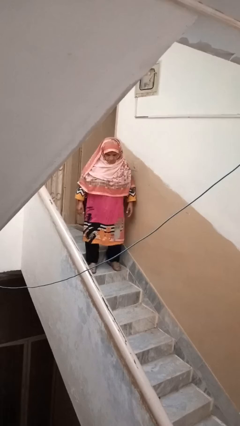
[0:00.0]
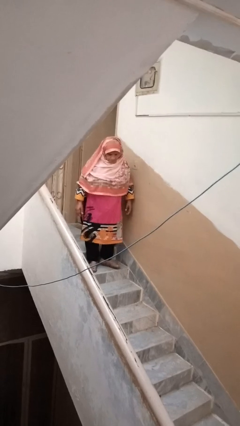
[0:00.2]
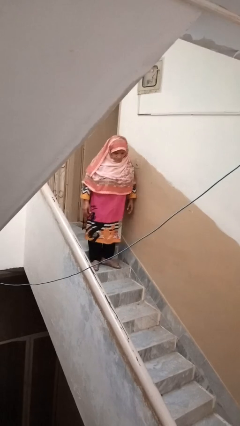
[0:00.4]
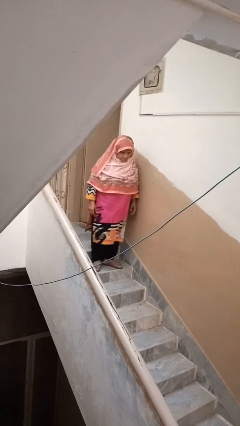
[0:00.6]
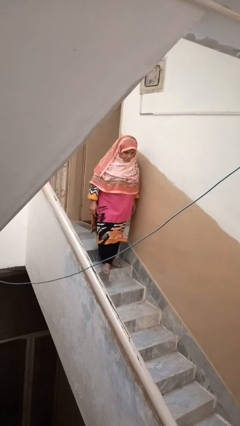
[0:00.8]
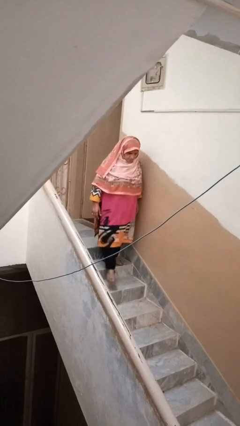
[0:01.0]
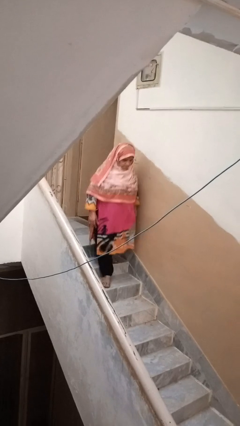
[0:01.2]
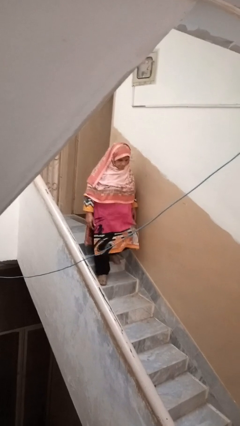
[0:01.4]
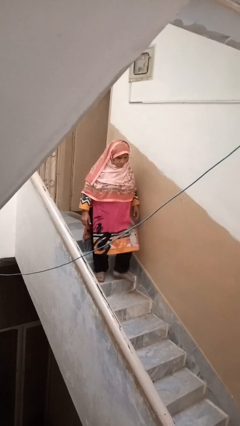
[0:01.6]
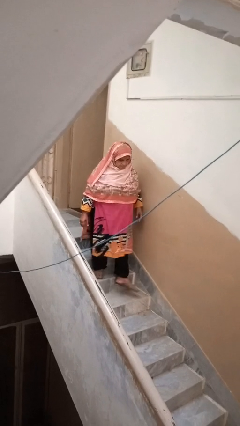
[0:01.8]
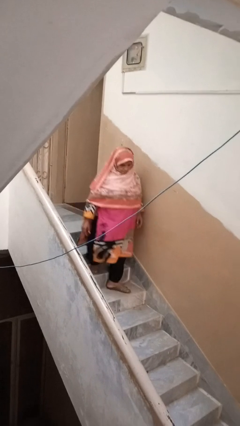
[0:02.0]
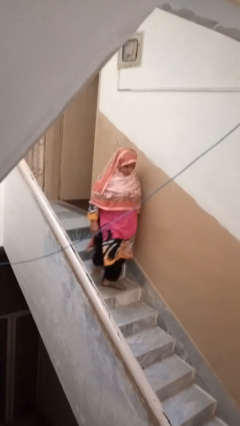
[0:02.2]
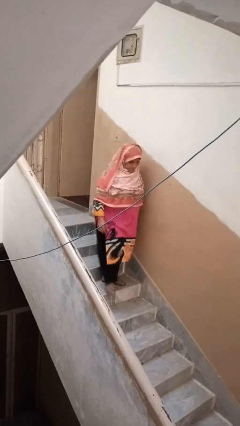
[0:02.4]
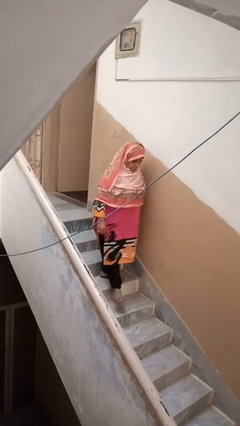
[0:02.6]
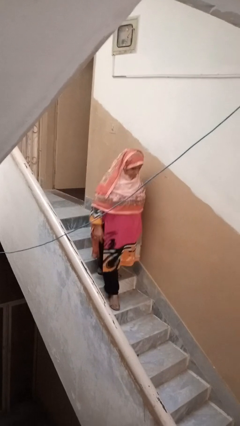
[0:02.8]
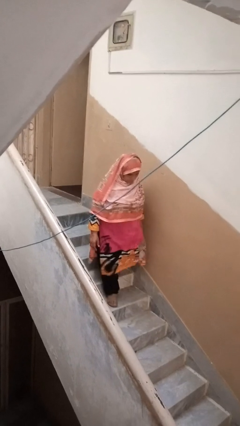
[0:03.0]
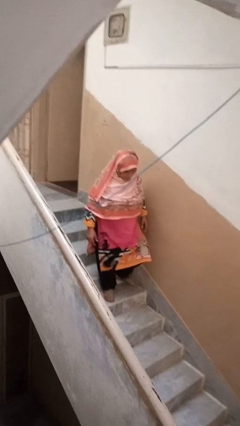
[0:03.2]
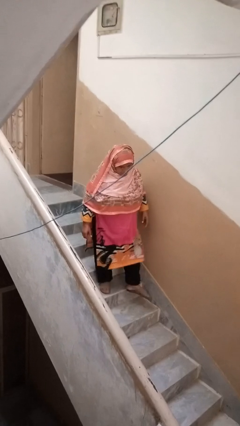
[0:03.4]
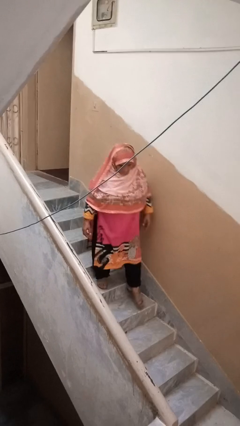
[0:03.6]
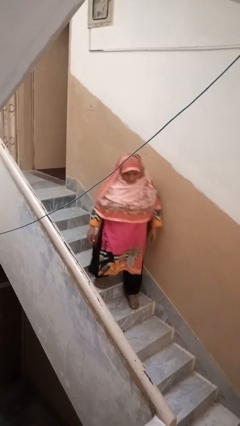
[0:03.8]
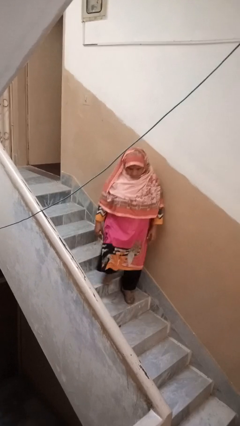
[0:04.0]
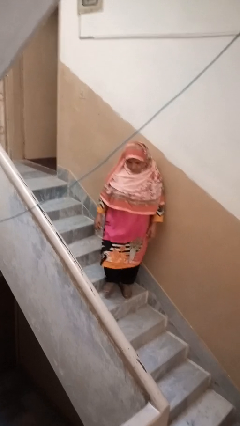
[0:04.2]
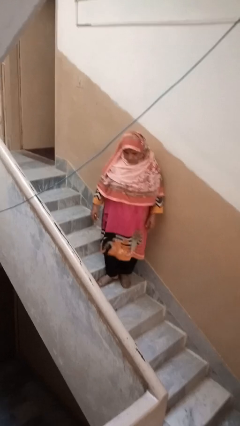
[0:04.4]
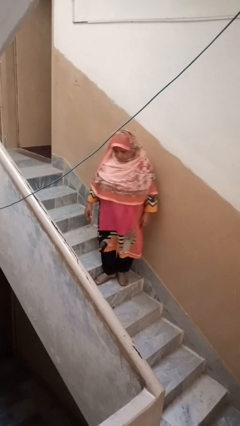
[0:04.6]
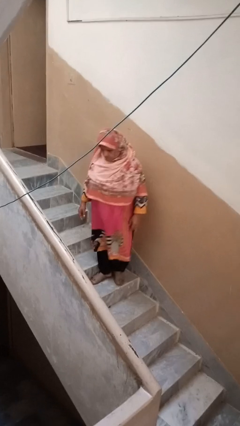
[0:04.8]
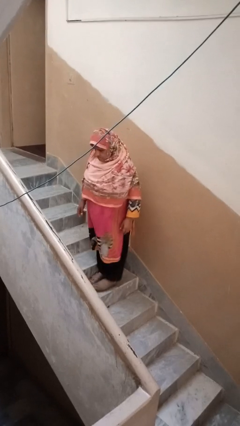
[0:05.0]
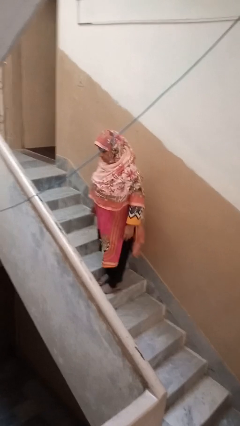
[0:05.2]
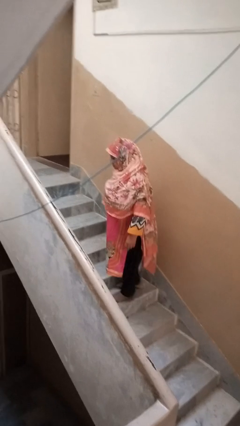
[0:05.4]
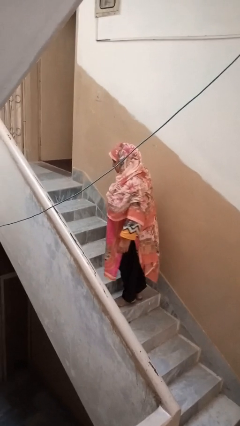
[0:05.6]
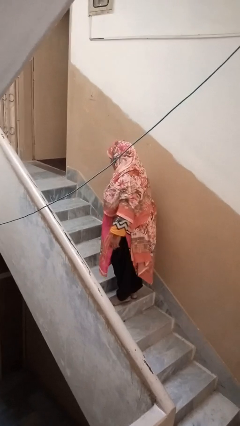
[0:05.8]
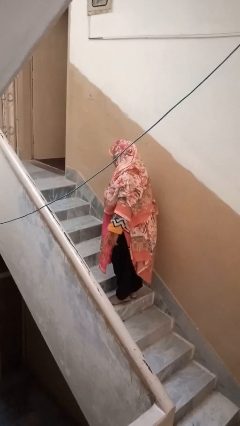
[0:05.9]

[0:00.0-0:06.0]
person climbs down stairs

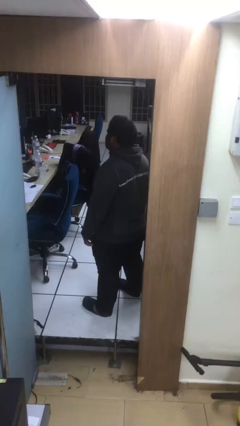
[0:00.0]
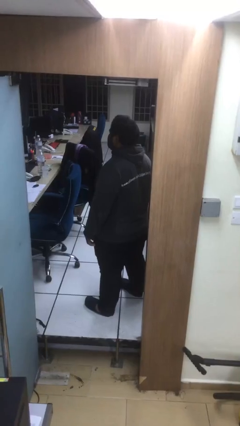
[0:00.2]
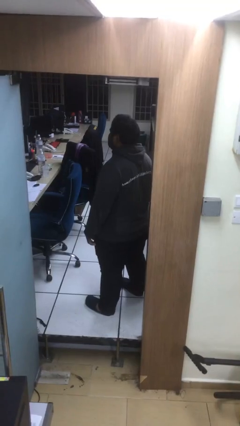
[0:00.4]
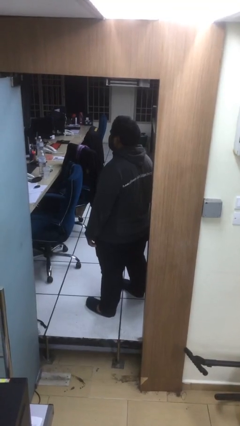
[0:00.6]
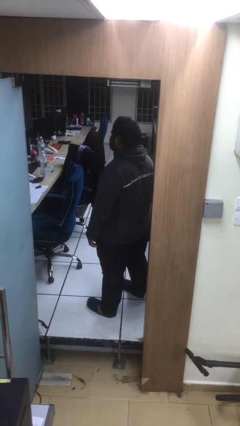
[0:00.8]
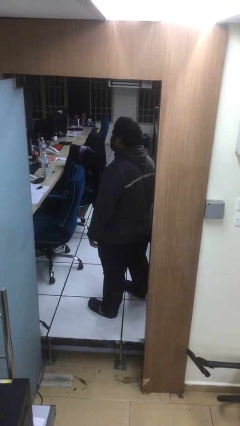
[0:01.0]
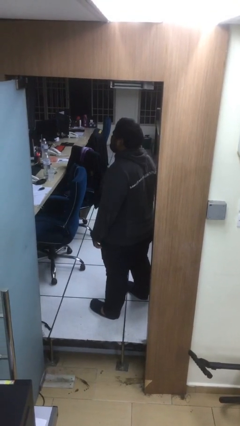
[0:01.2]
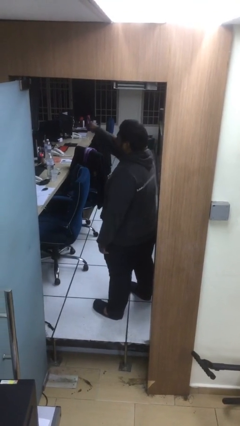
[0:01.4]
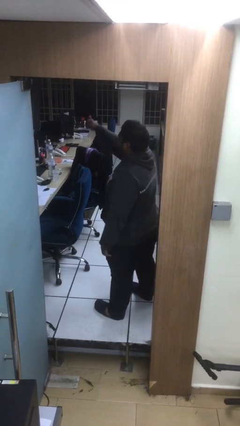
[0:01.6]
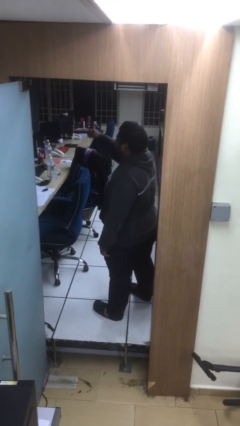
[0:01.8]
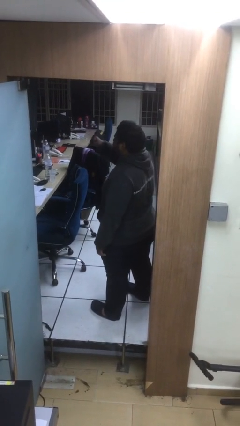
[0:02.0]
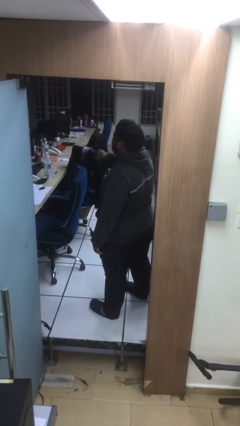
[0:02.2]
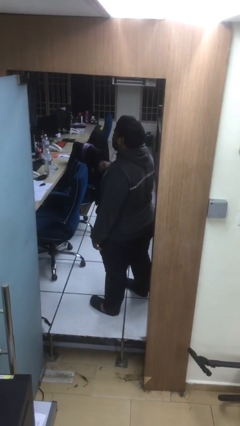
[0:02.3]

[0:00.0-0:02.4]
person punches

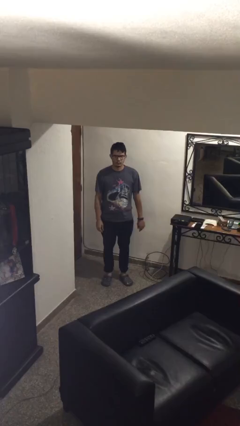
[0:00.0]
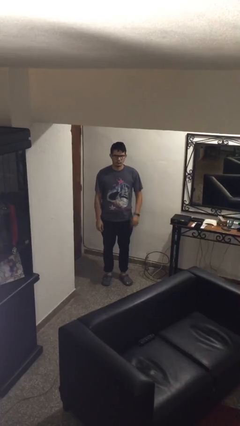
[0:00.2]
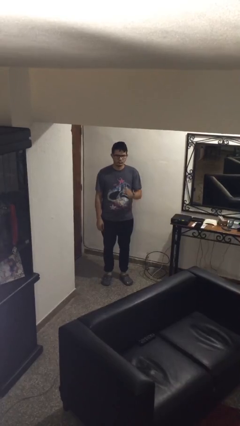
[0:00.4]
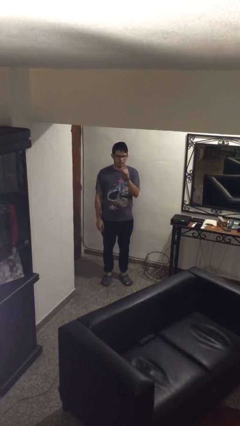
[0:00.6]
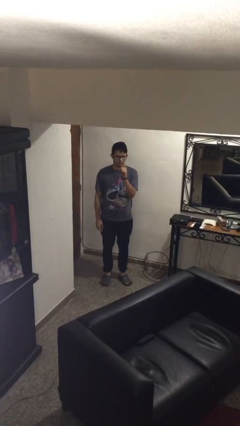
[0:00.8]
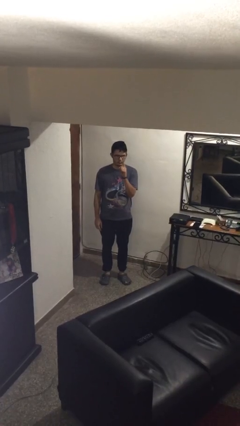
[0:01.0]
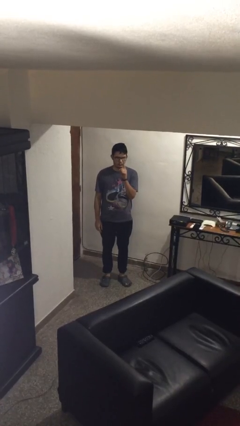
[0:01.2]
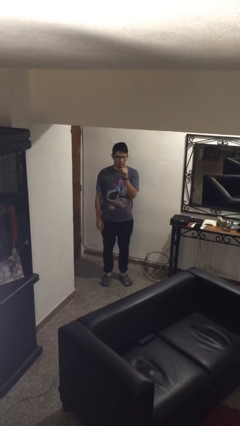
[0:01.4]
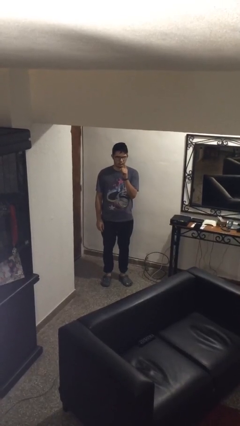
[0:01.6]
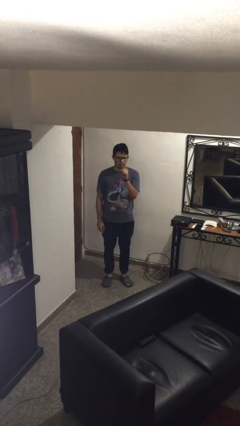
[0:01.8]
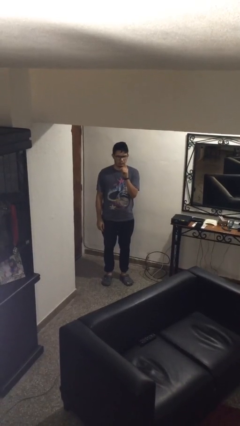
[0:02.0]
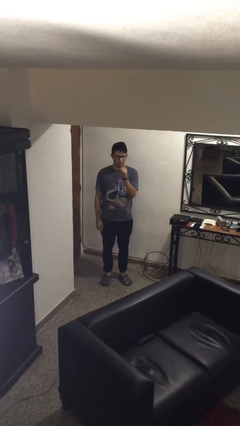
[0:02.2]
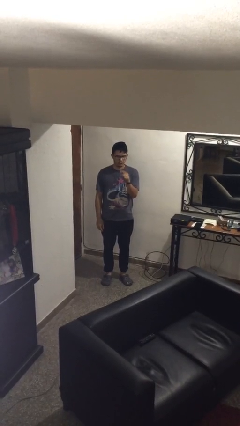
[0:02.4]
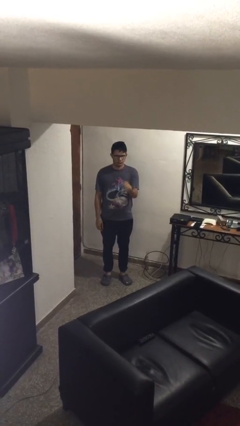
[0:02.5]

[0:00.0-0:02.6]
person gestures number one

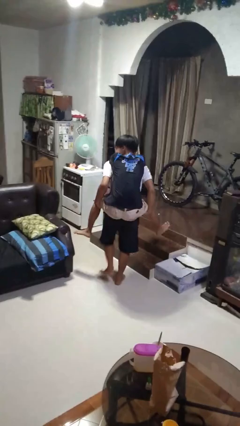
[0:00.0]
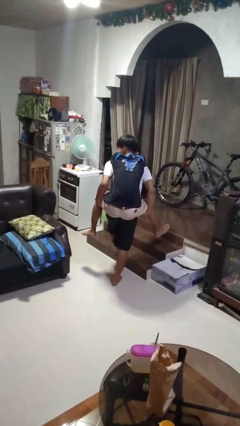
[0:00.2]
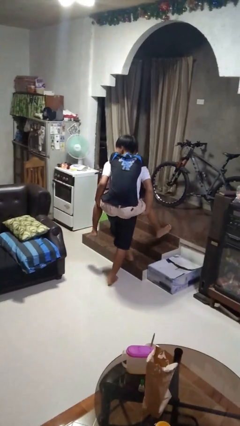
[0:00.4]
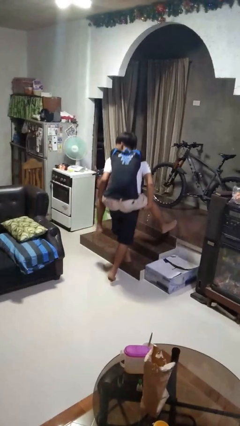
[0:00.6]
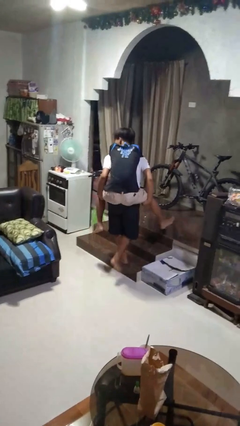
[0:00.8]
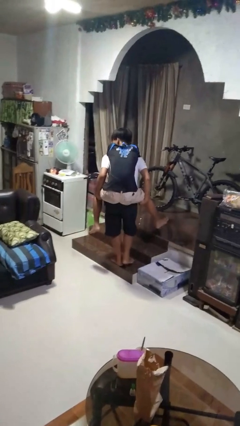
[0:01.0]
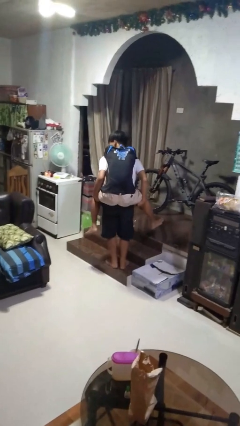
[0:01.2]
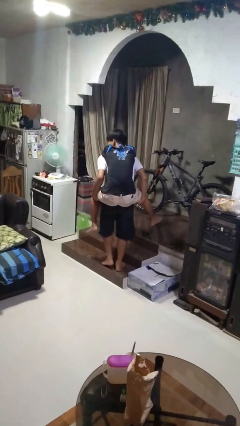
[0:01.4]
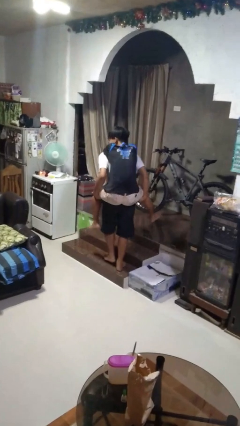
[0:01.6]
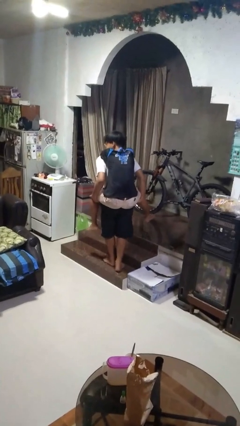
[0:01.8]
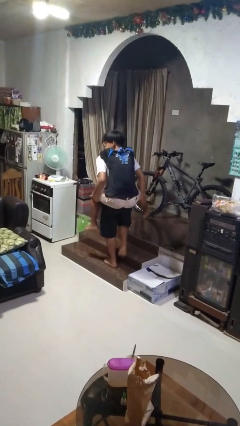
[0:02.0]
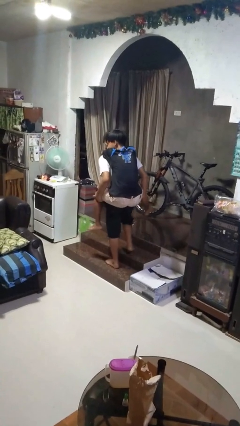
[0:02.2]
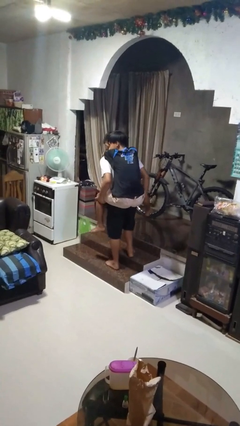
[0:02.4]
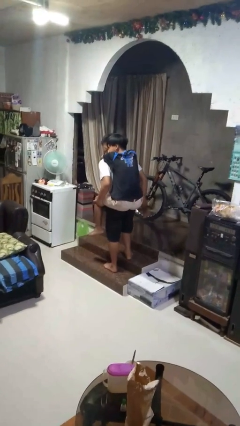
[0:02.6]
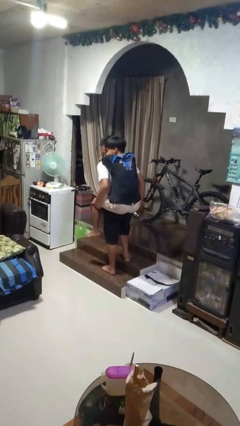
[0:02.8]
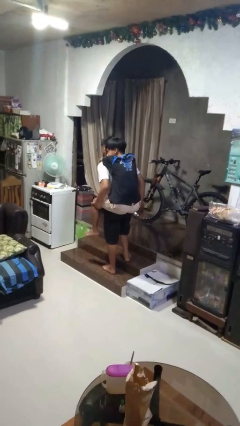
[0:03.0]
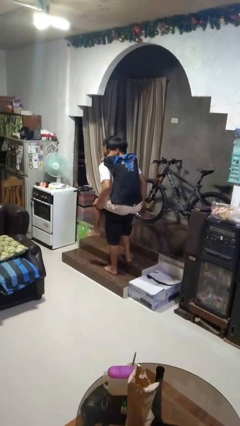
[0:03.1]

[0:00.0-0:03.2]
person carries person on back

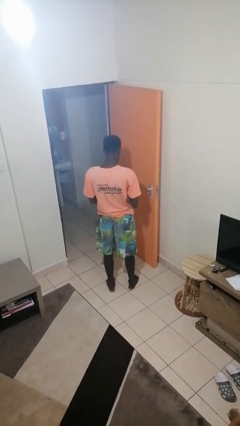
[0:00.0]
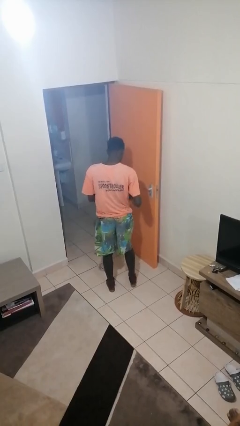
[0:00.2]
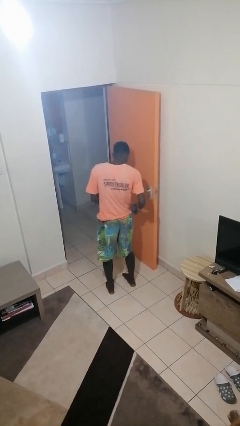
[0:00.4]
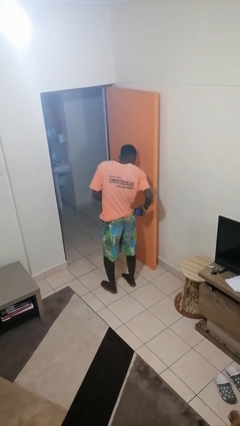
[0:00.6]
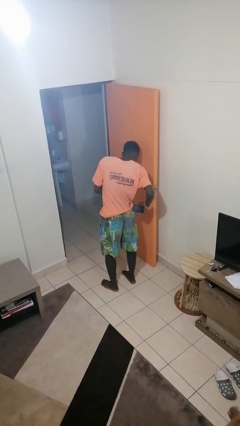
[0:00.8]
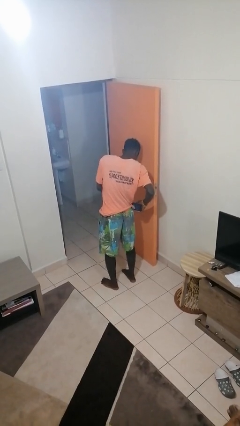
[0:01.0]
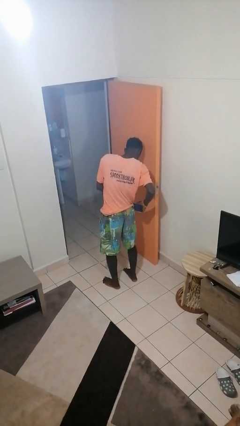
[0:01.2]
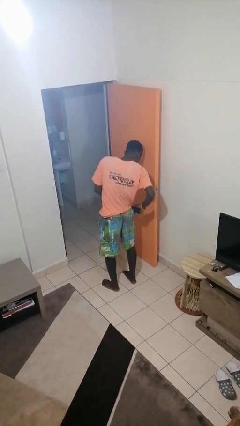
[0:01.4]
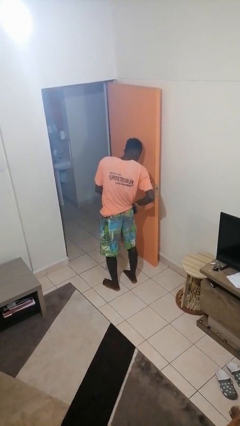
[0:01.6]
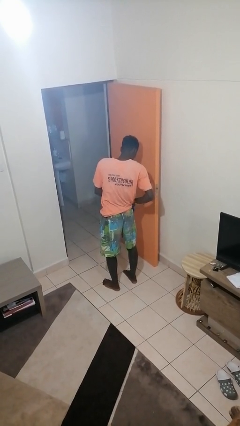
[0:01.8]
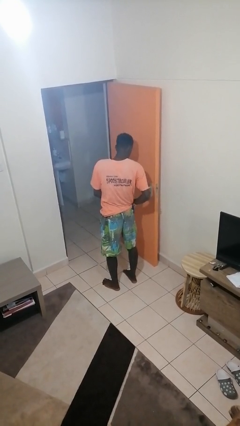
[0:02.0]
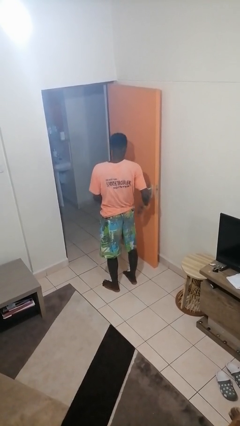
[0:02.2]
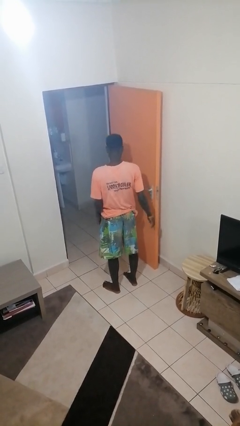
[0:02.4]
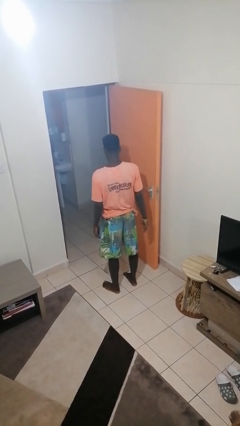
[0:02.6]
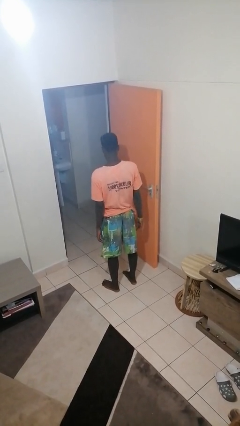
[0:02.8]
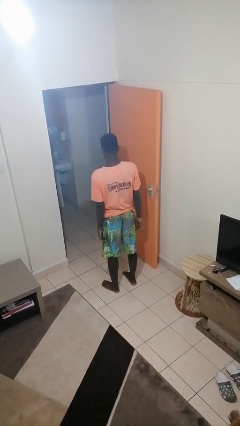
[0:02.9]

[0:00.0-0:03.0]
person puts phone into pocket

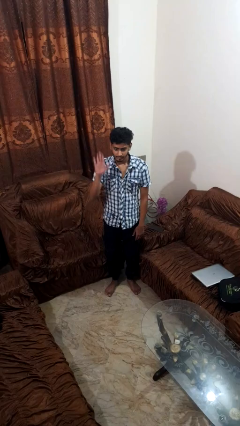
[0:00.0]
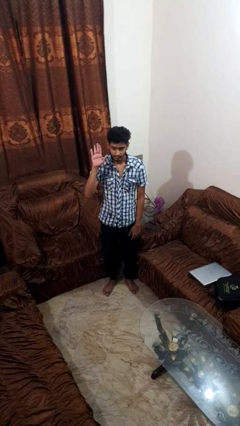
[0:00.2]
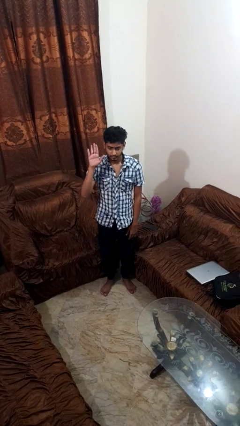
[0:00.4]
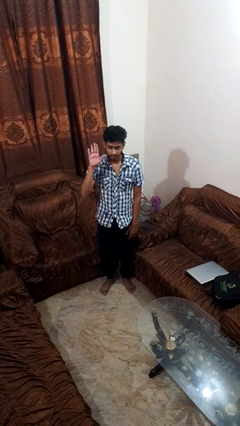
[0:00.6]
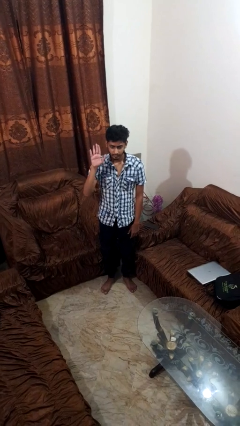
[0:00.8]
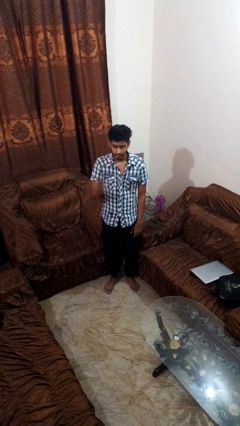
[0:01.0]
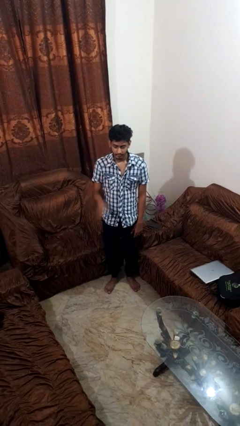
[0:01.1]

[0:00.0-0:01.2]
person gestures raise hand
